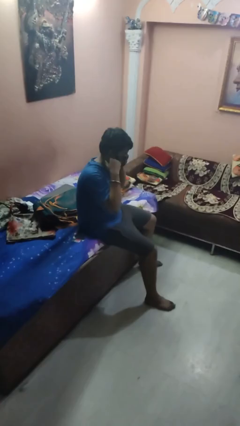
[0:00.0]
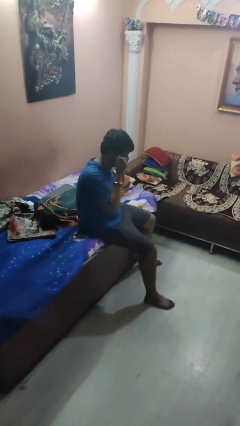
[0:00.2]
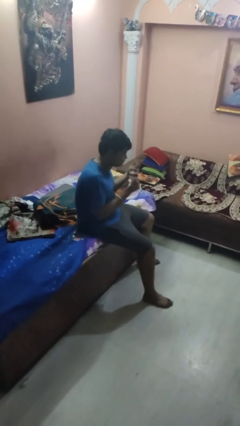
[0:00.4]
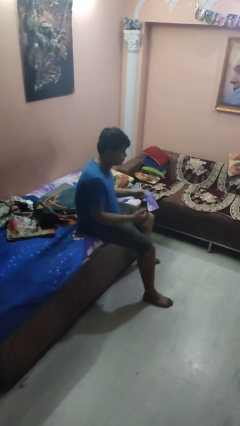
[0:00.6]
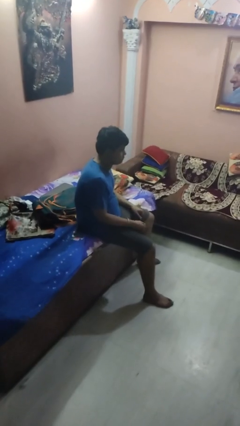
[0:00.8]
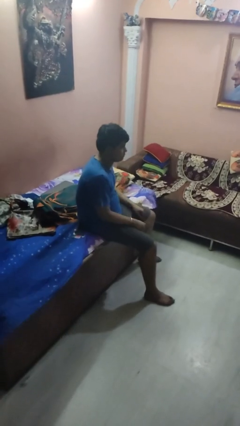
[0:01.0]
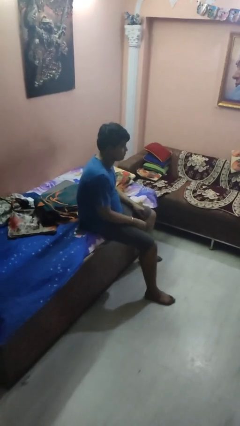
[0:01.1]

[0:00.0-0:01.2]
person takes off facemask

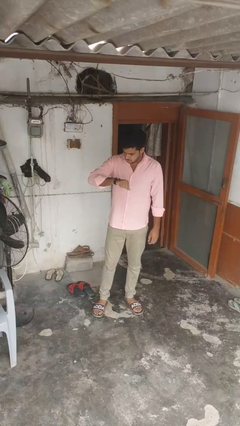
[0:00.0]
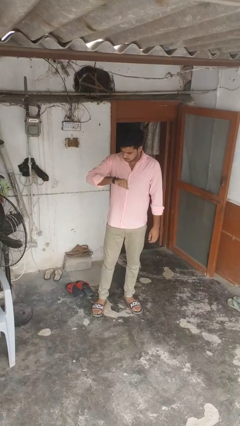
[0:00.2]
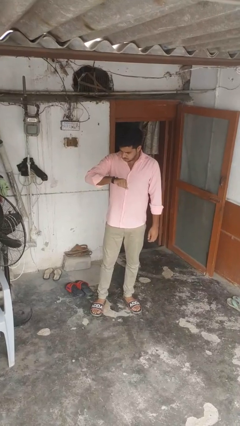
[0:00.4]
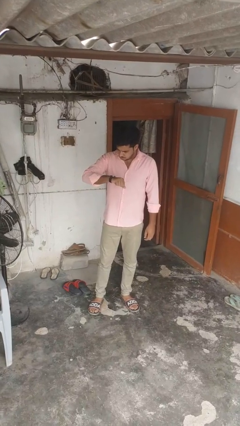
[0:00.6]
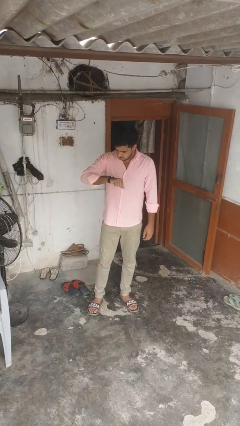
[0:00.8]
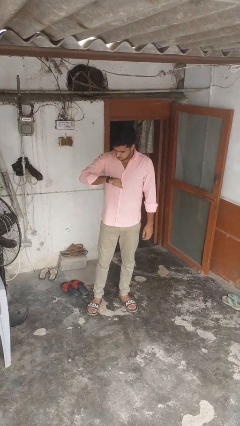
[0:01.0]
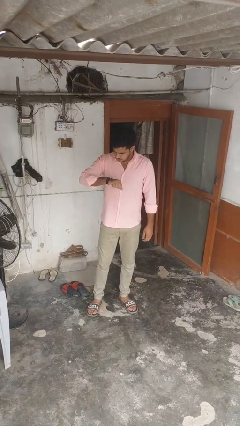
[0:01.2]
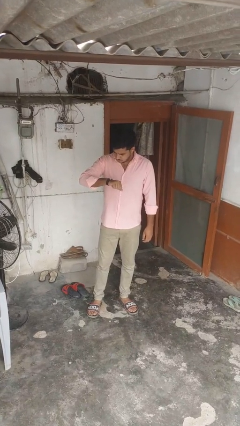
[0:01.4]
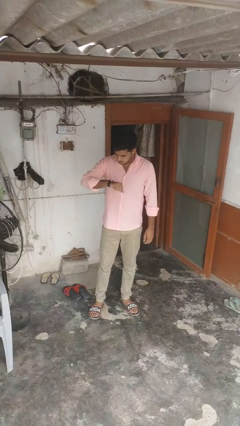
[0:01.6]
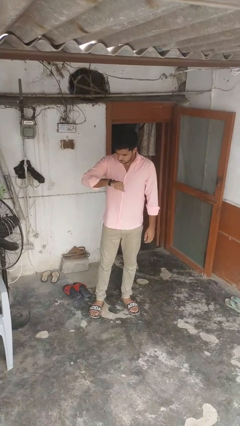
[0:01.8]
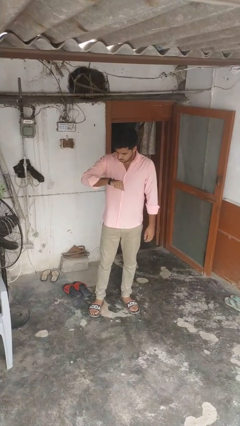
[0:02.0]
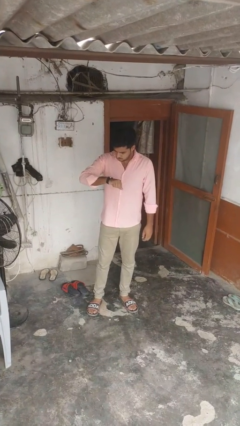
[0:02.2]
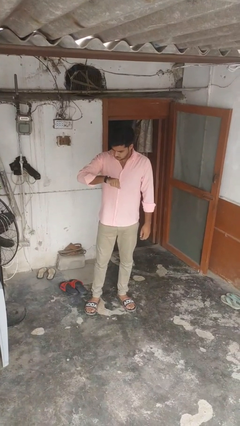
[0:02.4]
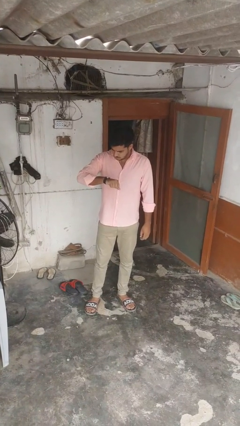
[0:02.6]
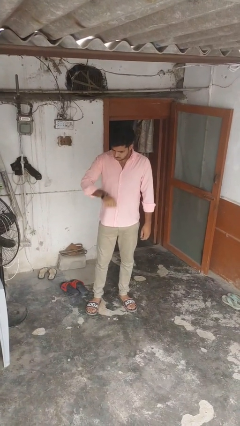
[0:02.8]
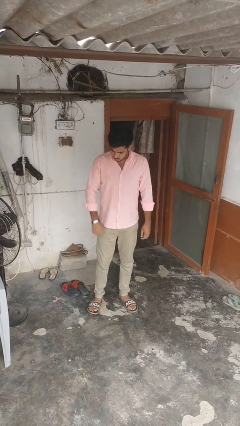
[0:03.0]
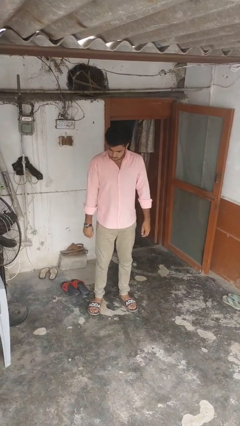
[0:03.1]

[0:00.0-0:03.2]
person looks at wristwatch

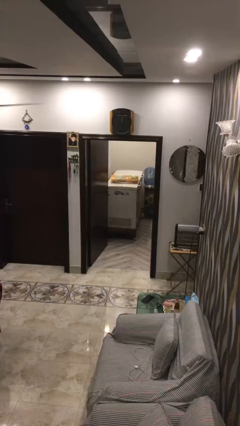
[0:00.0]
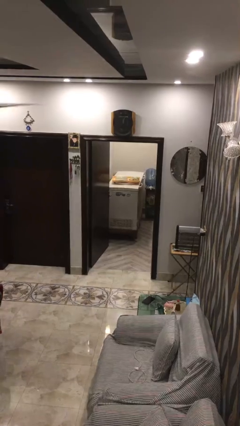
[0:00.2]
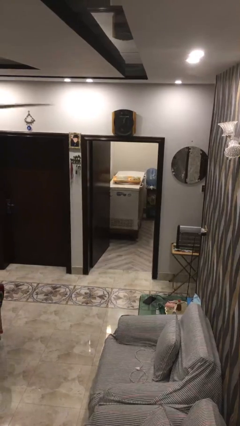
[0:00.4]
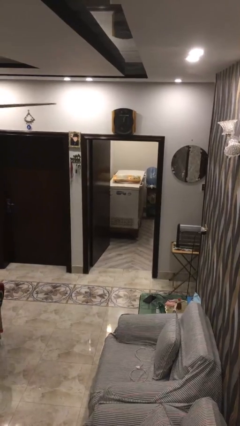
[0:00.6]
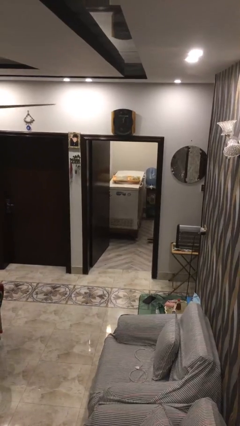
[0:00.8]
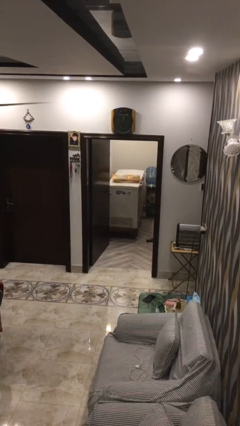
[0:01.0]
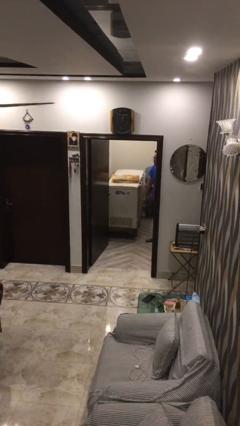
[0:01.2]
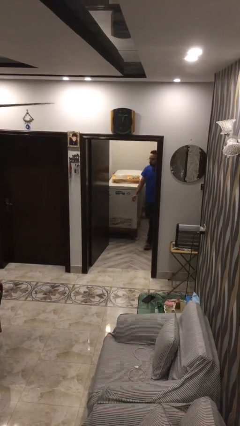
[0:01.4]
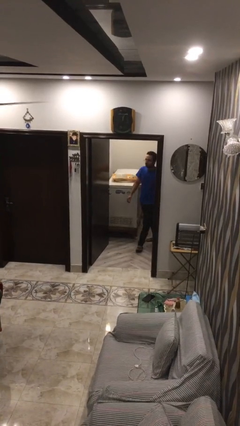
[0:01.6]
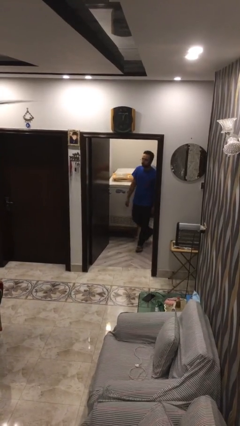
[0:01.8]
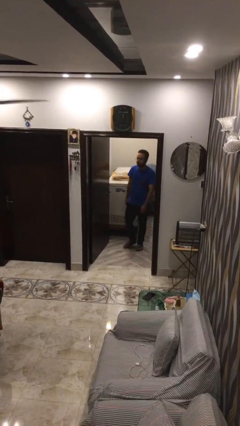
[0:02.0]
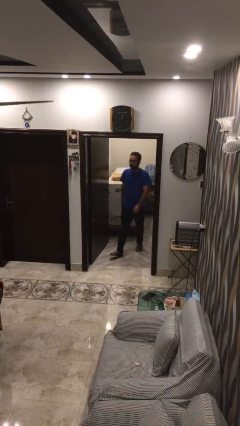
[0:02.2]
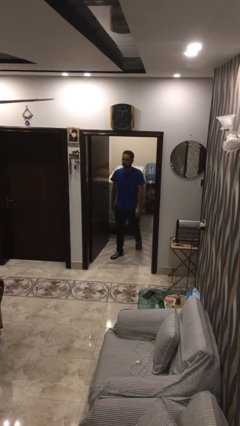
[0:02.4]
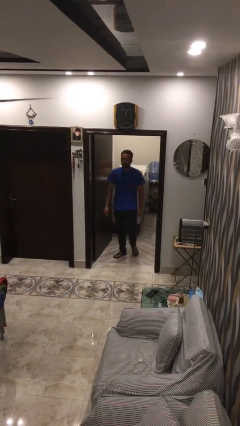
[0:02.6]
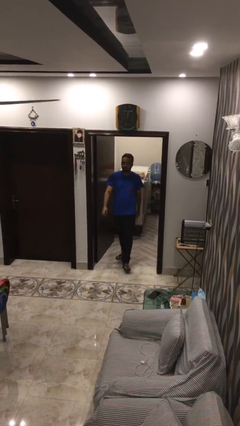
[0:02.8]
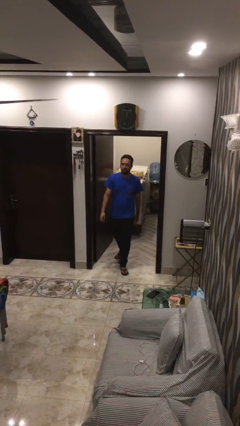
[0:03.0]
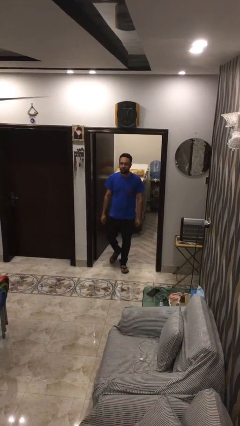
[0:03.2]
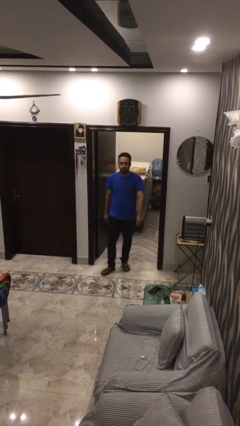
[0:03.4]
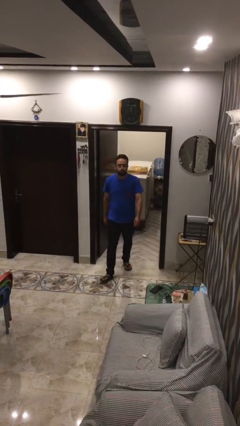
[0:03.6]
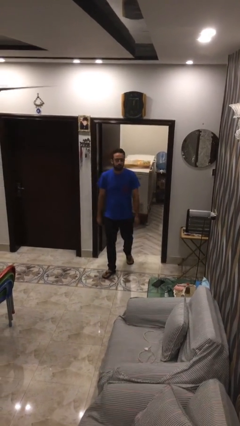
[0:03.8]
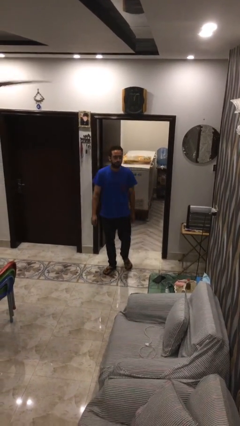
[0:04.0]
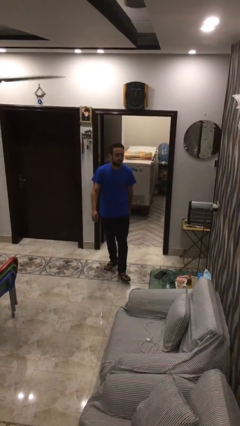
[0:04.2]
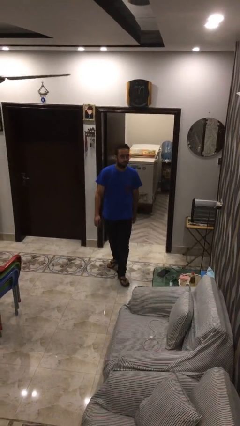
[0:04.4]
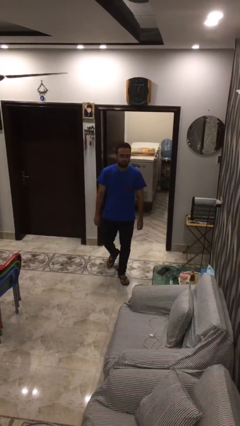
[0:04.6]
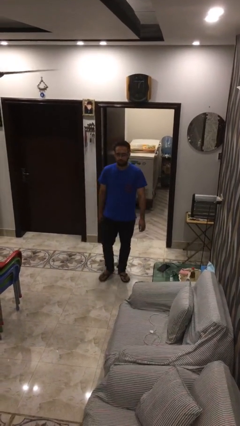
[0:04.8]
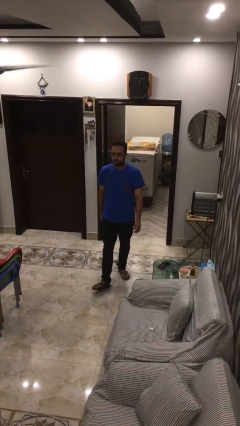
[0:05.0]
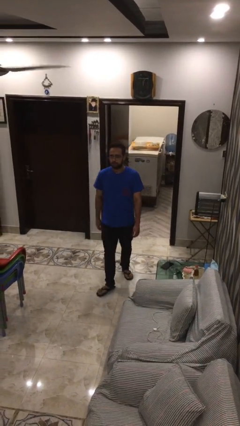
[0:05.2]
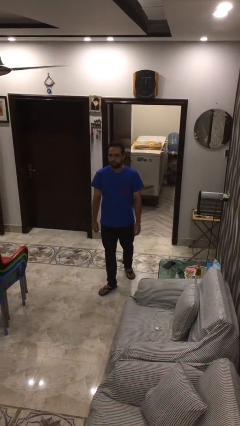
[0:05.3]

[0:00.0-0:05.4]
person enters scene through structure

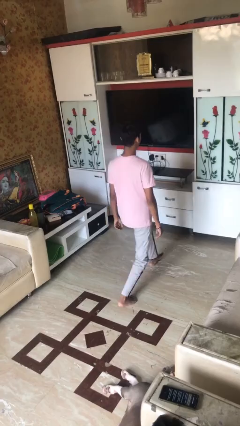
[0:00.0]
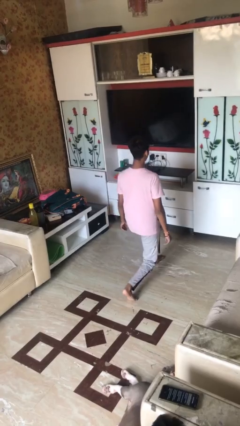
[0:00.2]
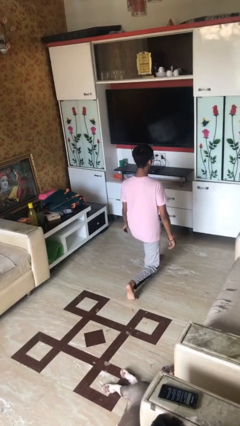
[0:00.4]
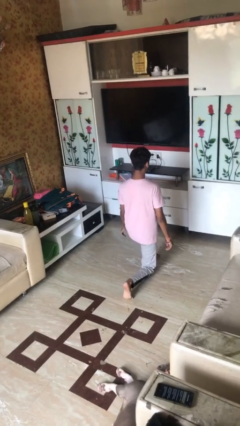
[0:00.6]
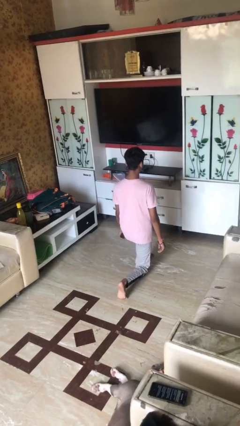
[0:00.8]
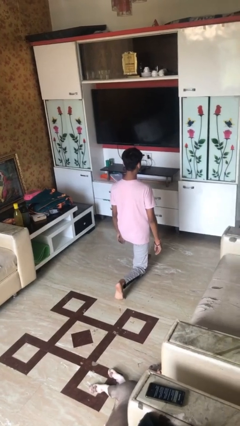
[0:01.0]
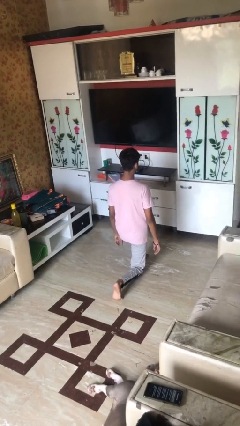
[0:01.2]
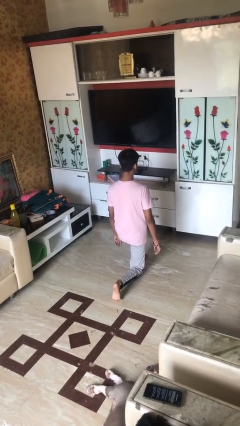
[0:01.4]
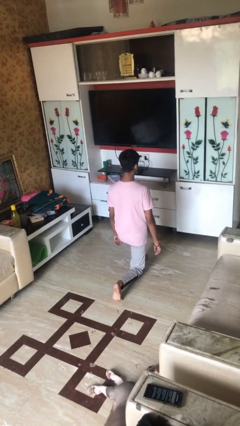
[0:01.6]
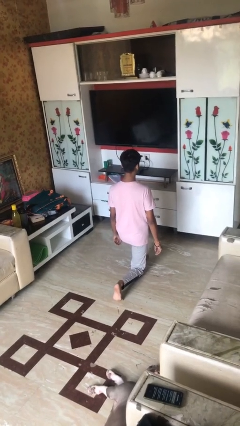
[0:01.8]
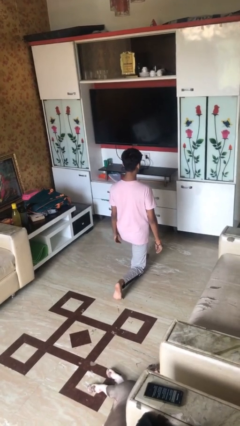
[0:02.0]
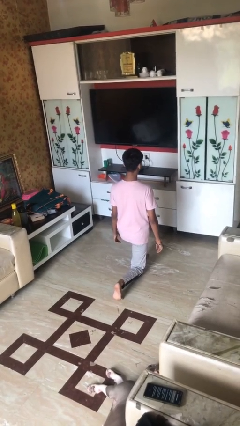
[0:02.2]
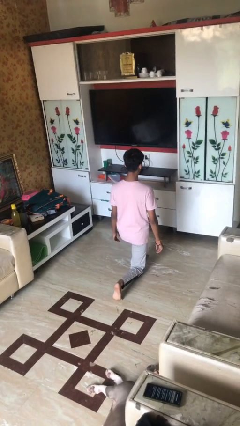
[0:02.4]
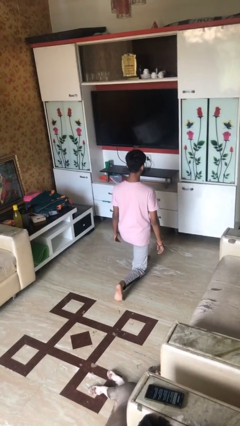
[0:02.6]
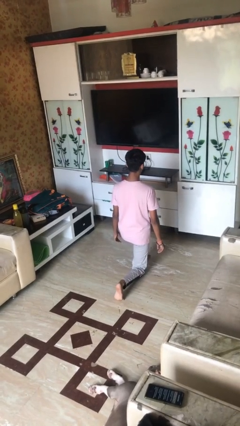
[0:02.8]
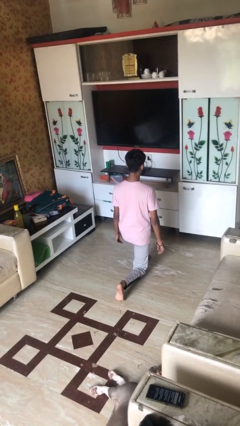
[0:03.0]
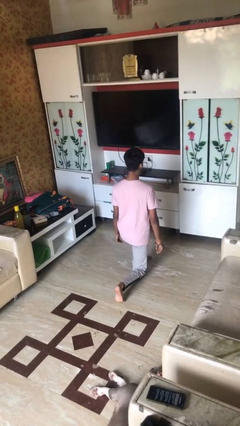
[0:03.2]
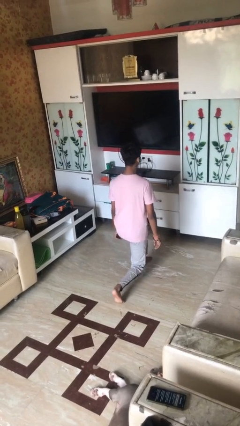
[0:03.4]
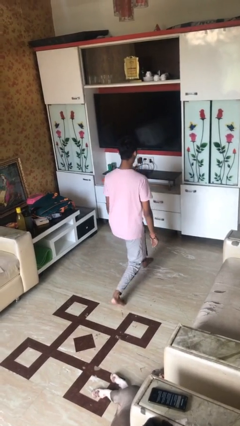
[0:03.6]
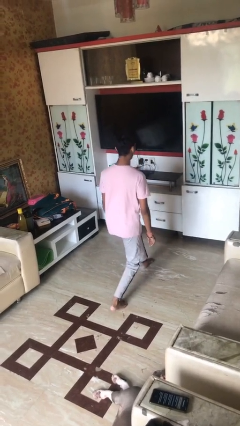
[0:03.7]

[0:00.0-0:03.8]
person exercises with lunges

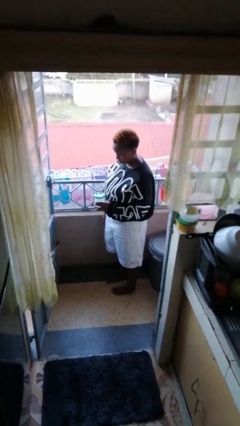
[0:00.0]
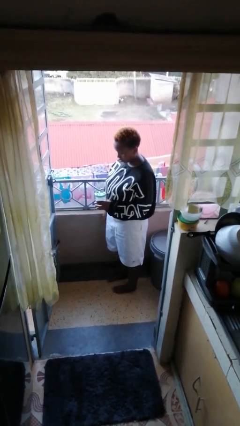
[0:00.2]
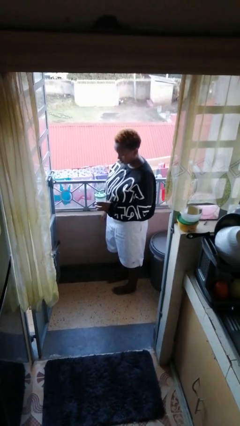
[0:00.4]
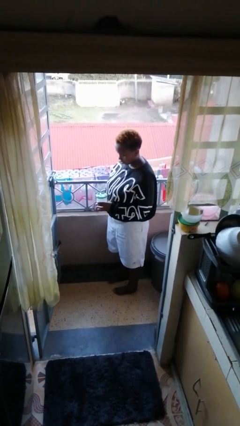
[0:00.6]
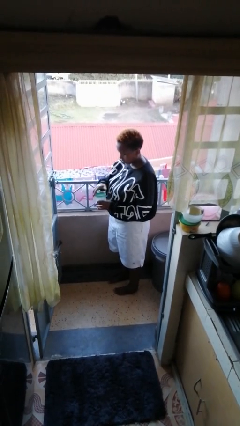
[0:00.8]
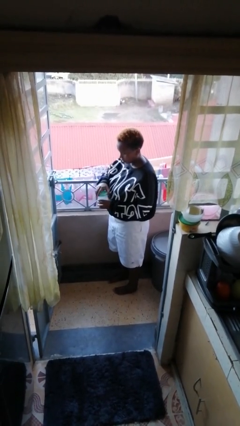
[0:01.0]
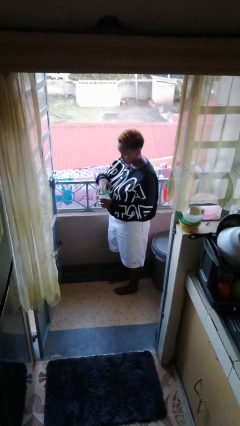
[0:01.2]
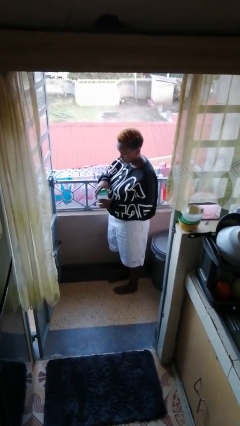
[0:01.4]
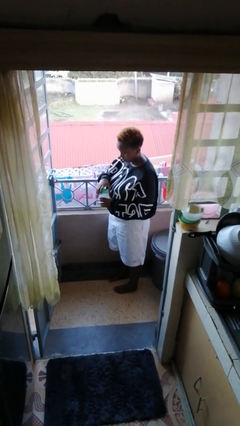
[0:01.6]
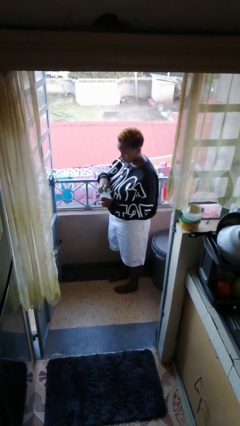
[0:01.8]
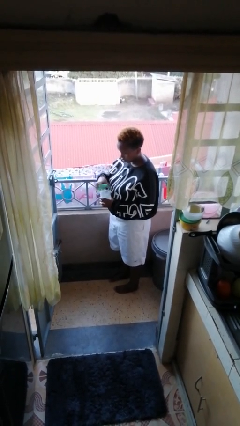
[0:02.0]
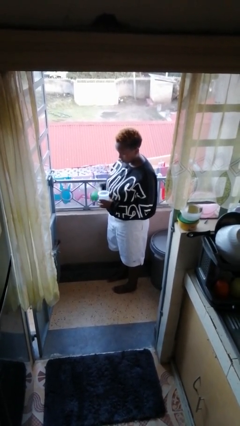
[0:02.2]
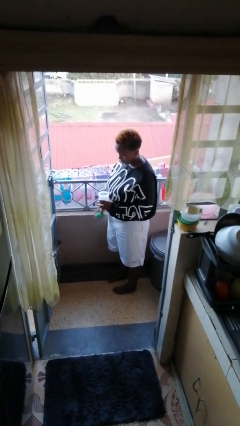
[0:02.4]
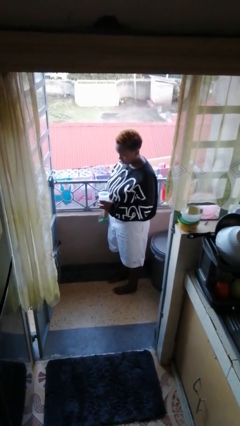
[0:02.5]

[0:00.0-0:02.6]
person opens jar

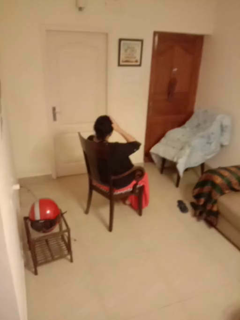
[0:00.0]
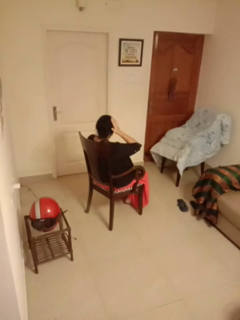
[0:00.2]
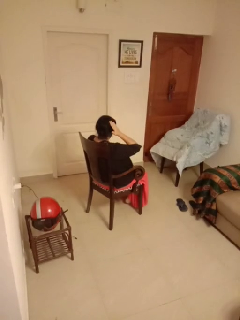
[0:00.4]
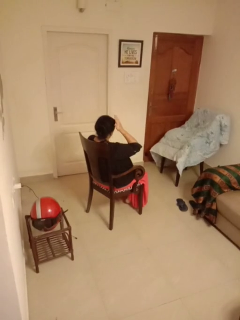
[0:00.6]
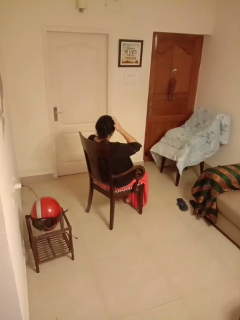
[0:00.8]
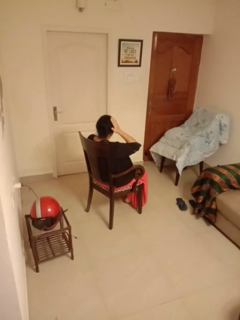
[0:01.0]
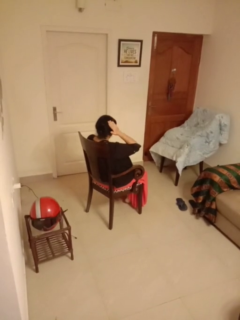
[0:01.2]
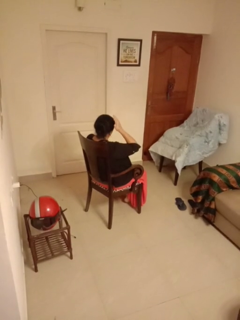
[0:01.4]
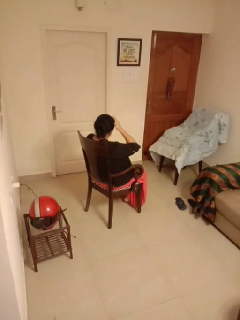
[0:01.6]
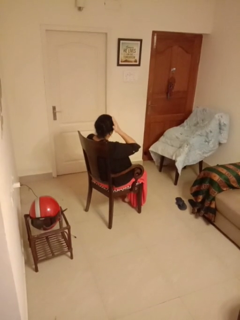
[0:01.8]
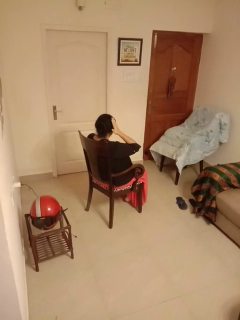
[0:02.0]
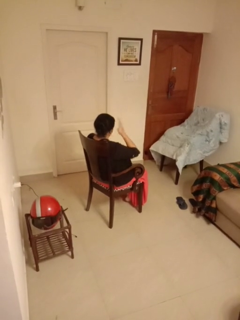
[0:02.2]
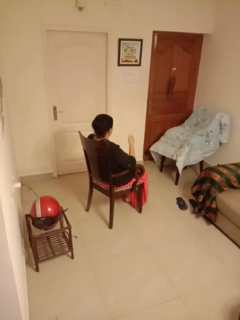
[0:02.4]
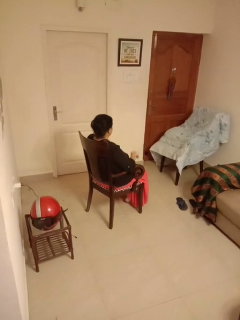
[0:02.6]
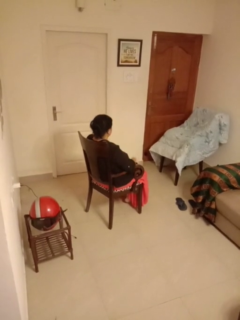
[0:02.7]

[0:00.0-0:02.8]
person strokes hair
